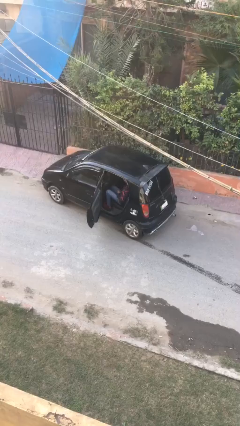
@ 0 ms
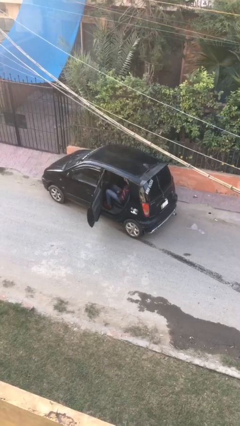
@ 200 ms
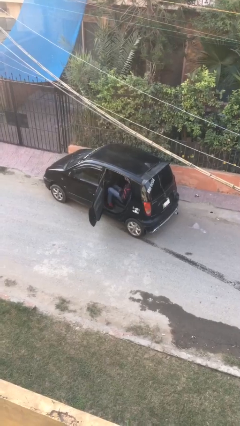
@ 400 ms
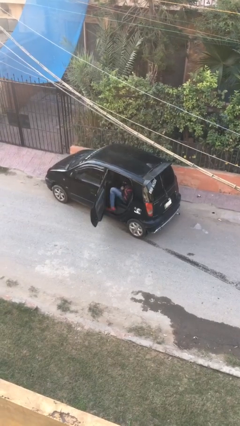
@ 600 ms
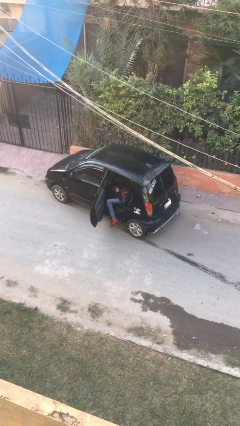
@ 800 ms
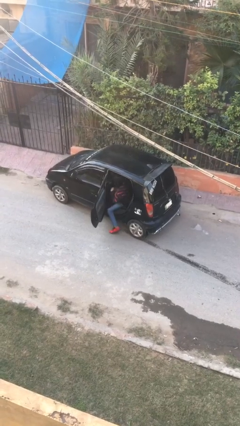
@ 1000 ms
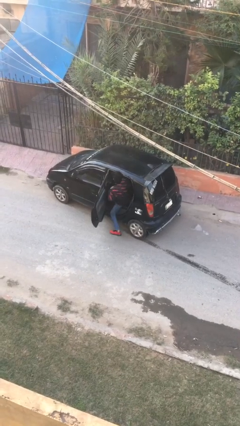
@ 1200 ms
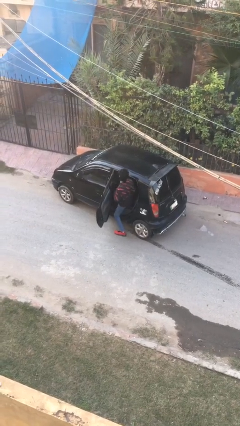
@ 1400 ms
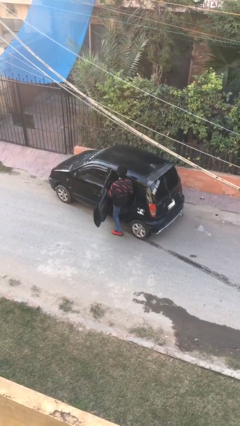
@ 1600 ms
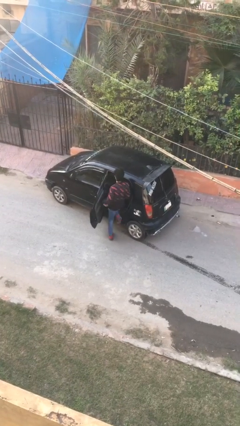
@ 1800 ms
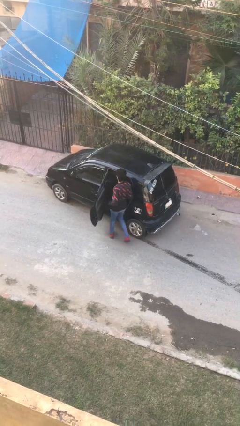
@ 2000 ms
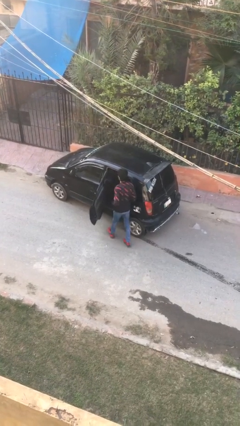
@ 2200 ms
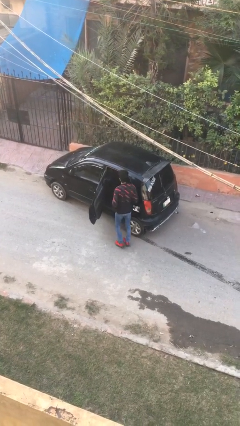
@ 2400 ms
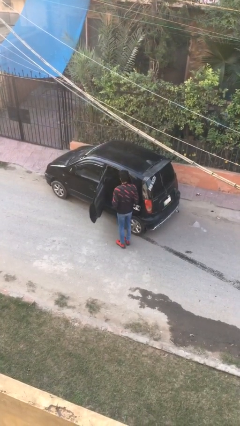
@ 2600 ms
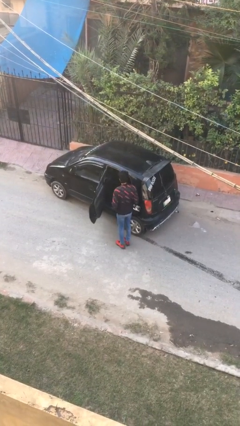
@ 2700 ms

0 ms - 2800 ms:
person exits car

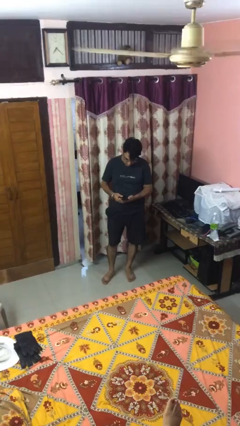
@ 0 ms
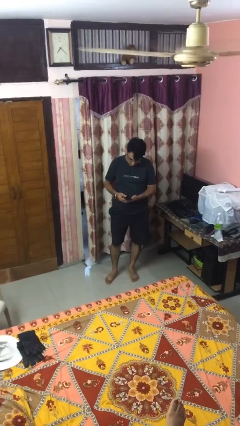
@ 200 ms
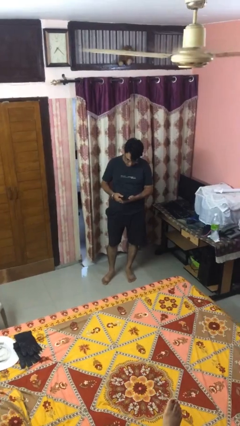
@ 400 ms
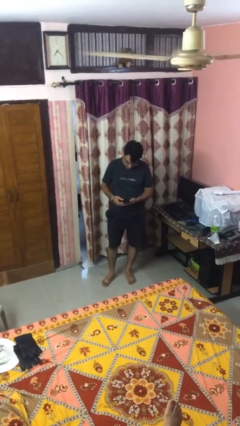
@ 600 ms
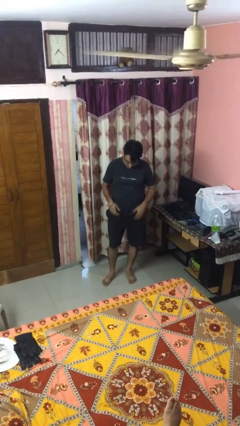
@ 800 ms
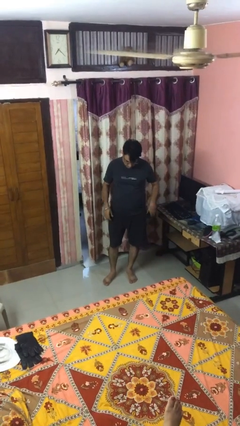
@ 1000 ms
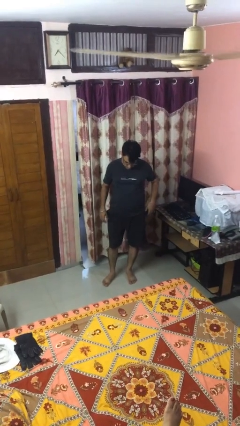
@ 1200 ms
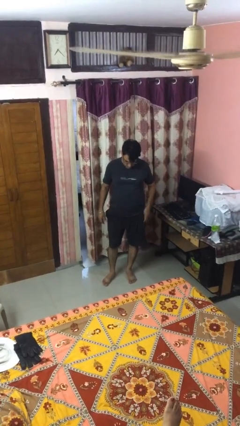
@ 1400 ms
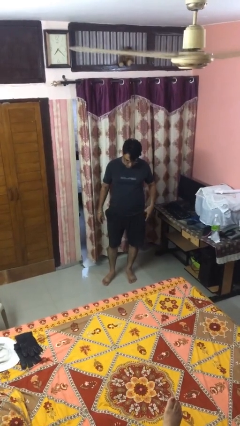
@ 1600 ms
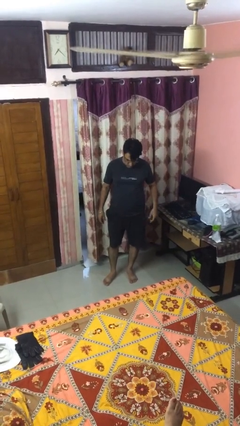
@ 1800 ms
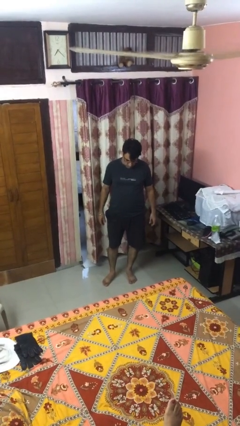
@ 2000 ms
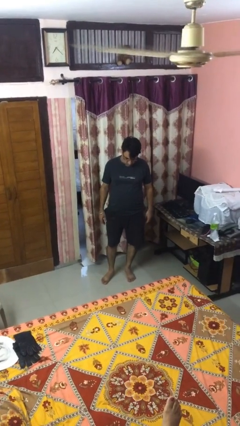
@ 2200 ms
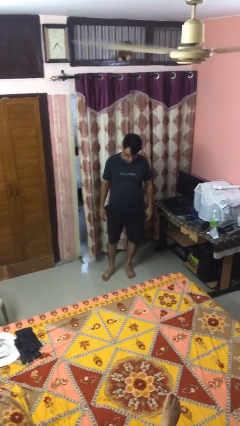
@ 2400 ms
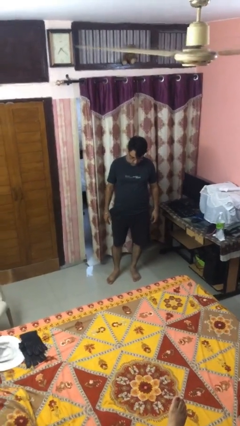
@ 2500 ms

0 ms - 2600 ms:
person puts phone into pocket

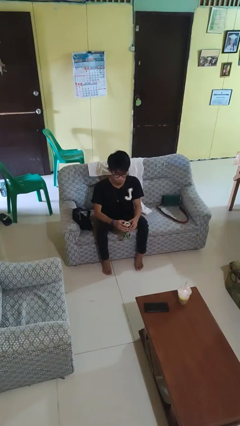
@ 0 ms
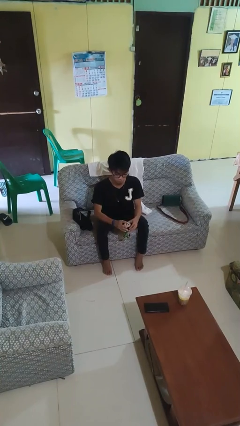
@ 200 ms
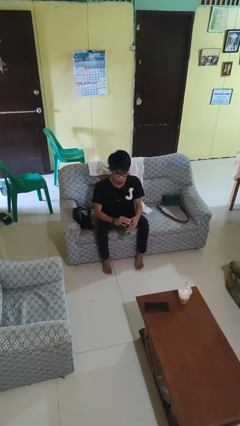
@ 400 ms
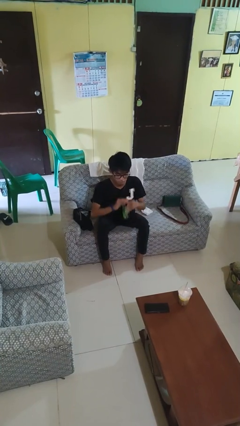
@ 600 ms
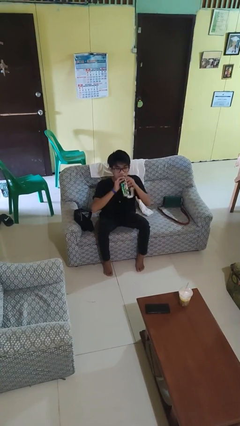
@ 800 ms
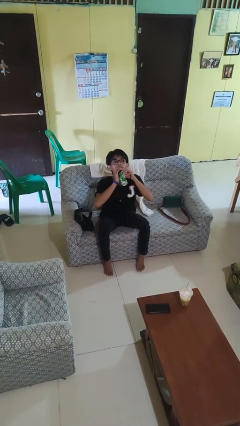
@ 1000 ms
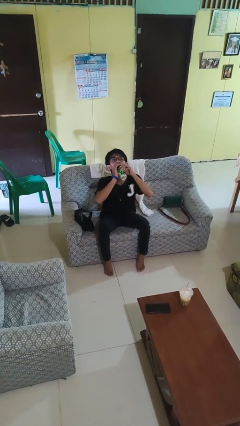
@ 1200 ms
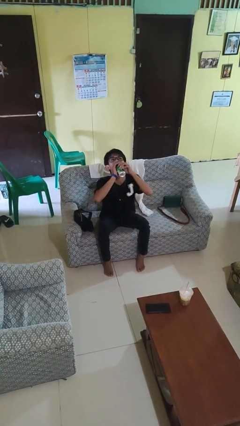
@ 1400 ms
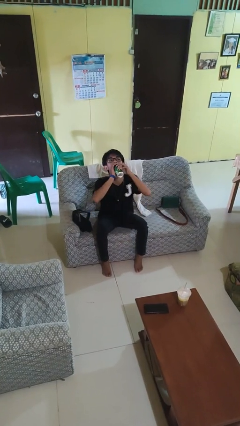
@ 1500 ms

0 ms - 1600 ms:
person drinks from beverage can

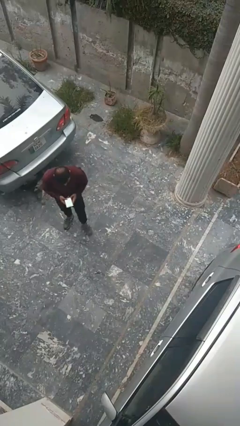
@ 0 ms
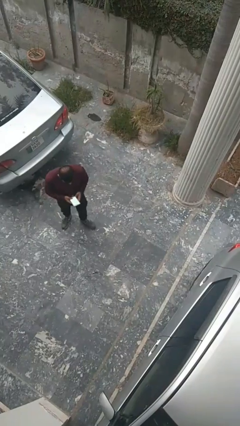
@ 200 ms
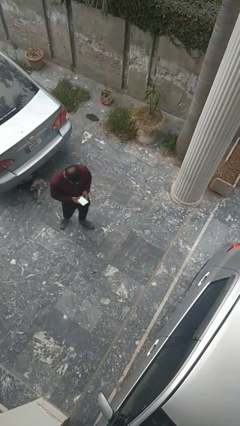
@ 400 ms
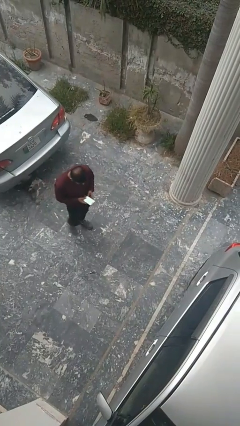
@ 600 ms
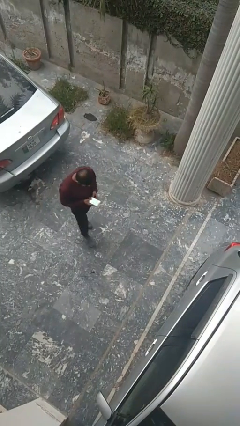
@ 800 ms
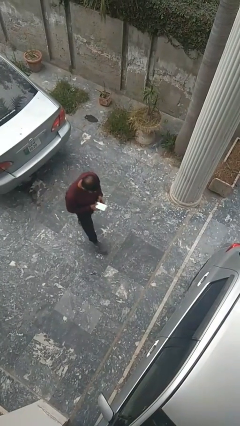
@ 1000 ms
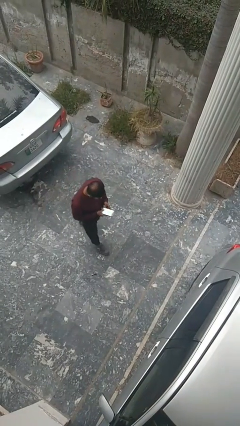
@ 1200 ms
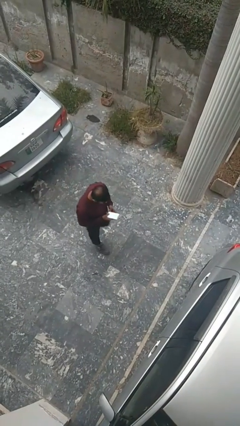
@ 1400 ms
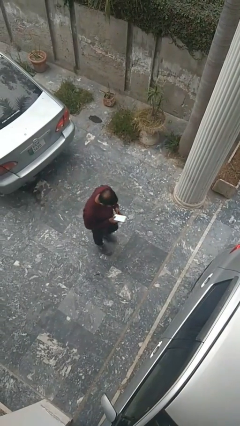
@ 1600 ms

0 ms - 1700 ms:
person enters scene through structure

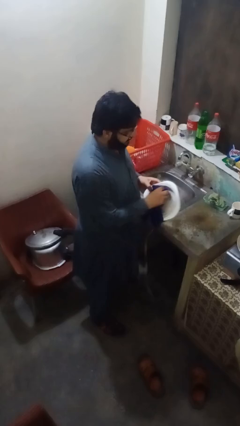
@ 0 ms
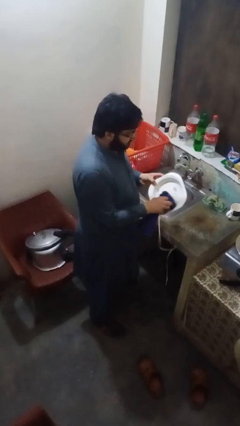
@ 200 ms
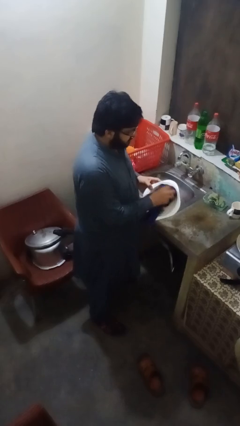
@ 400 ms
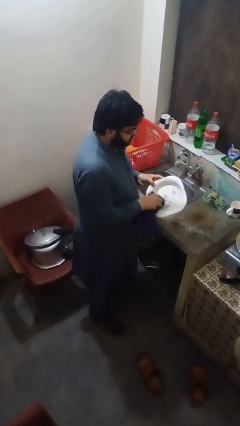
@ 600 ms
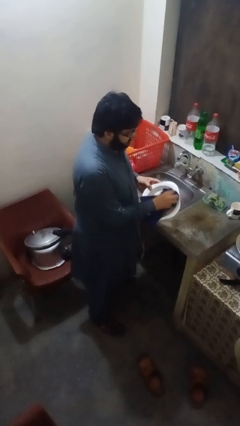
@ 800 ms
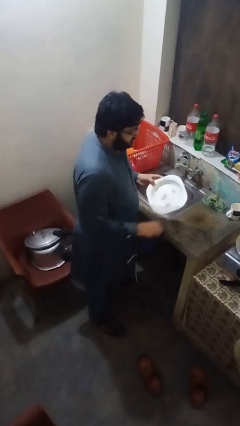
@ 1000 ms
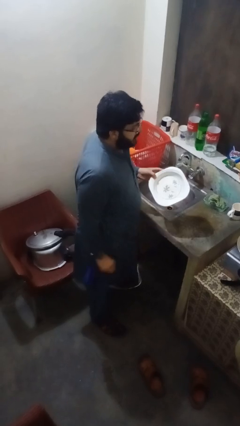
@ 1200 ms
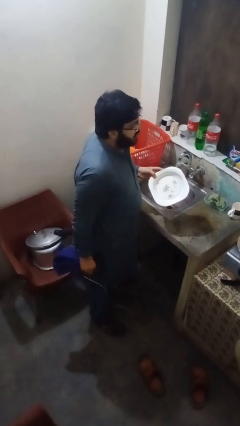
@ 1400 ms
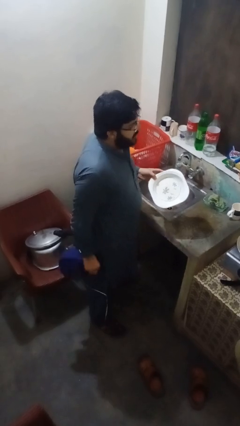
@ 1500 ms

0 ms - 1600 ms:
person dries dish

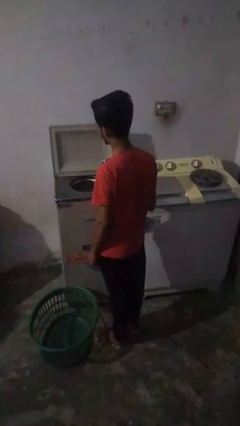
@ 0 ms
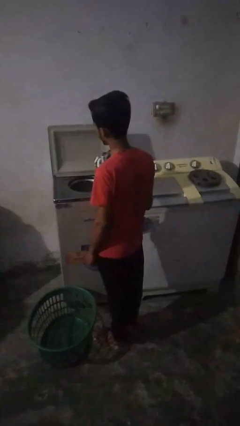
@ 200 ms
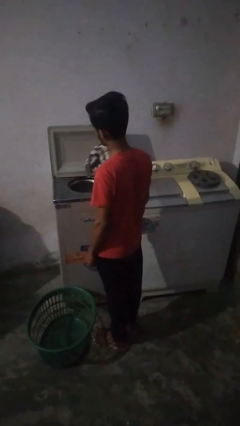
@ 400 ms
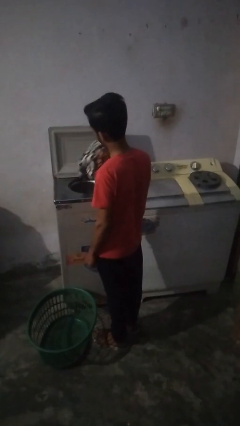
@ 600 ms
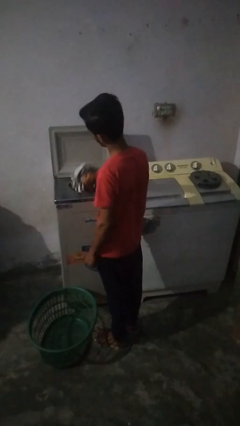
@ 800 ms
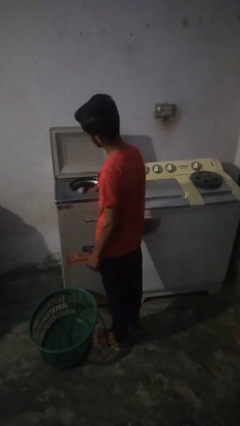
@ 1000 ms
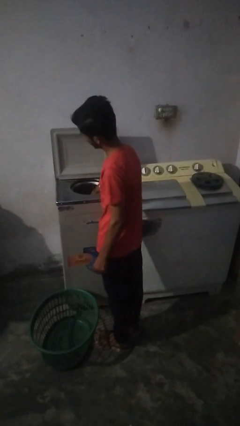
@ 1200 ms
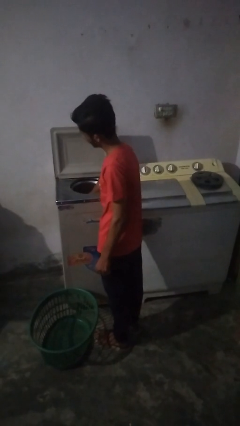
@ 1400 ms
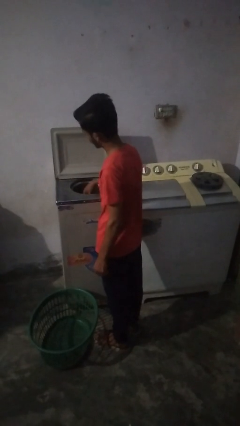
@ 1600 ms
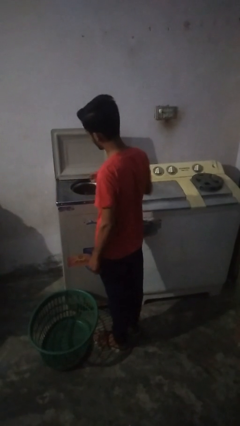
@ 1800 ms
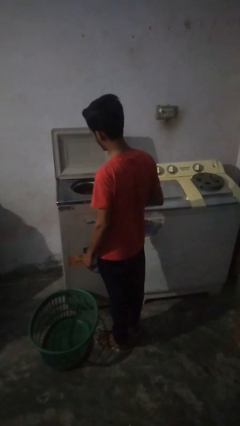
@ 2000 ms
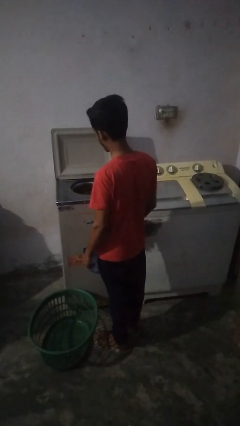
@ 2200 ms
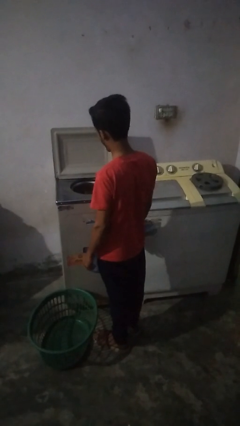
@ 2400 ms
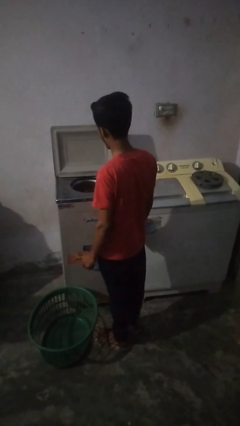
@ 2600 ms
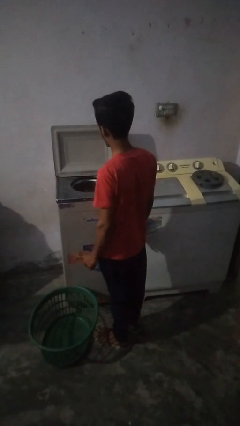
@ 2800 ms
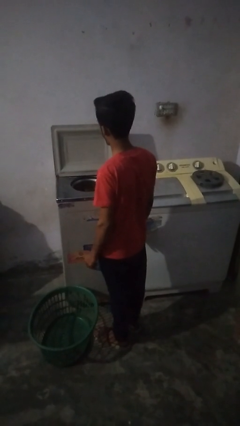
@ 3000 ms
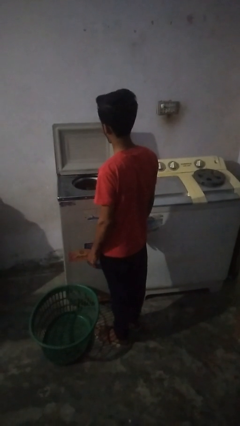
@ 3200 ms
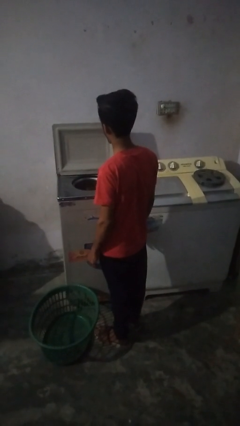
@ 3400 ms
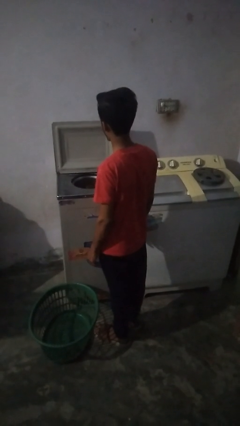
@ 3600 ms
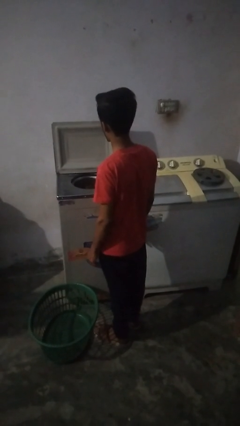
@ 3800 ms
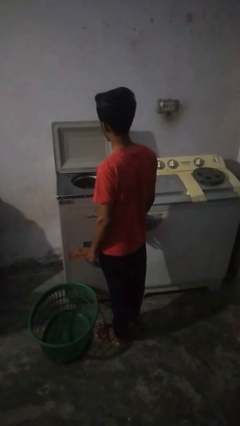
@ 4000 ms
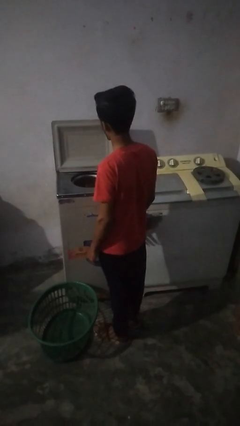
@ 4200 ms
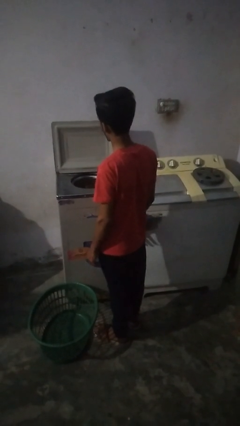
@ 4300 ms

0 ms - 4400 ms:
person loads dryer

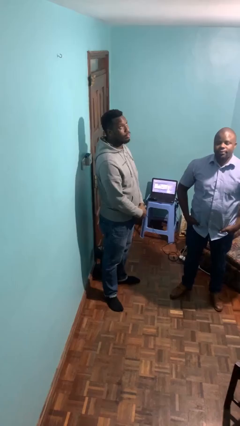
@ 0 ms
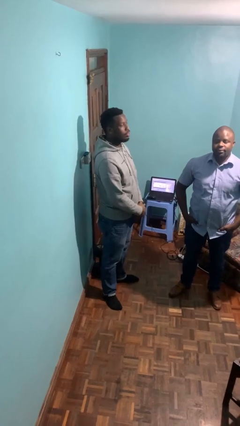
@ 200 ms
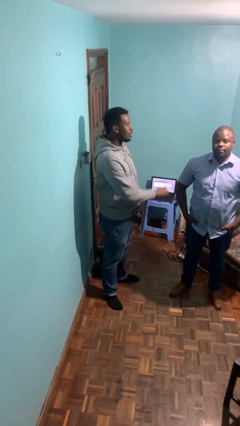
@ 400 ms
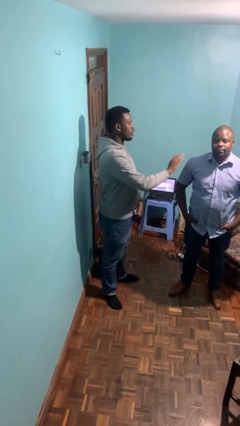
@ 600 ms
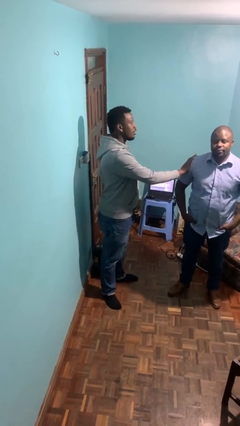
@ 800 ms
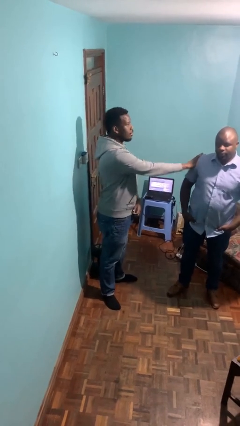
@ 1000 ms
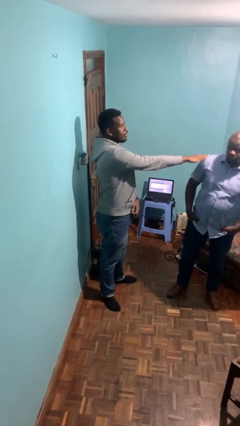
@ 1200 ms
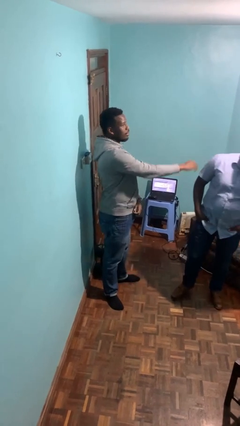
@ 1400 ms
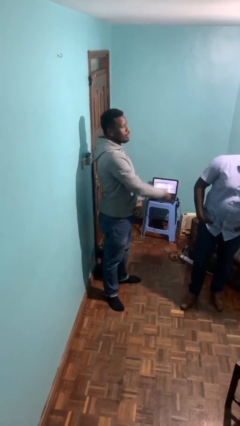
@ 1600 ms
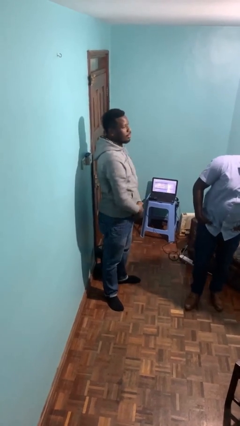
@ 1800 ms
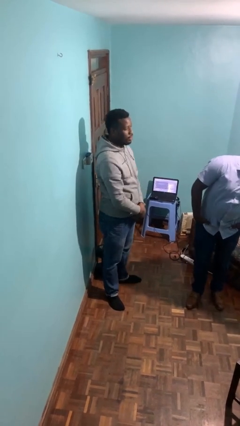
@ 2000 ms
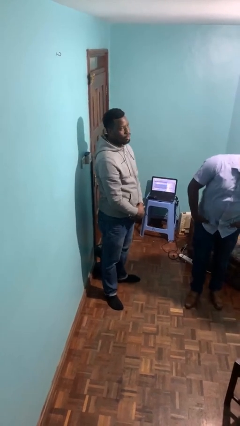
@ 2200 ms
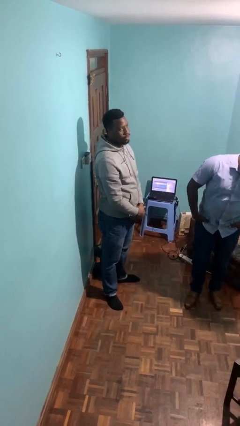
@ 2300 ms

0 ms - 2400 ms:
person shoves person
